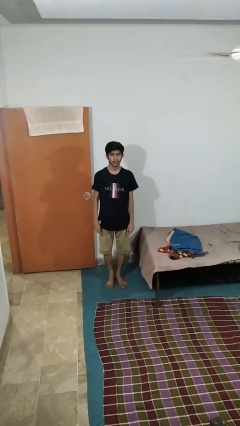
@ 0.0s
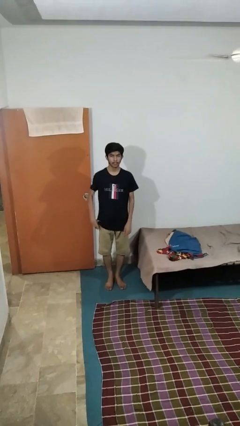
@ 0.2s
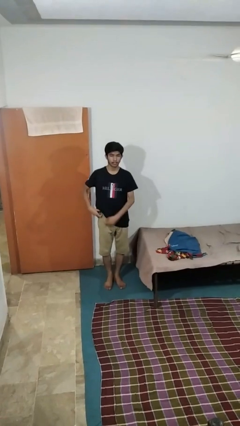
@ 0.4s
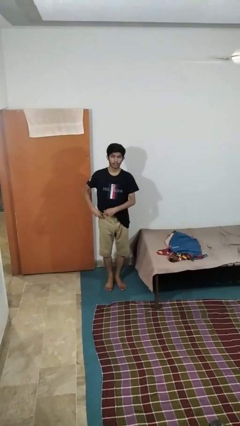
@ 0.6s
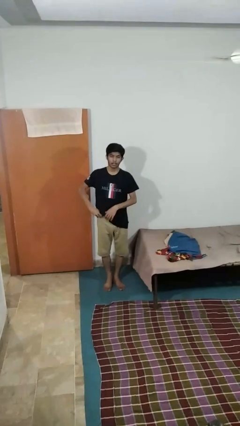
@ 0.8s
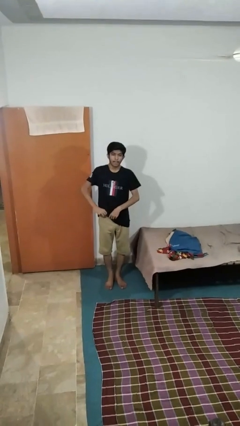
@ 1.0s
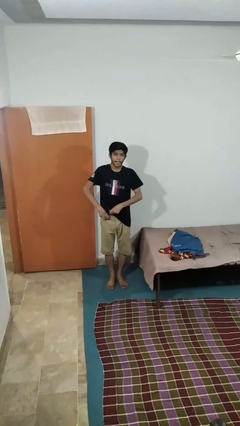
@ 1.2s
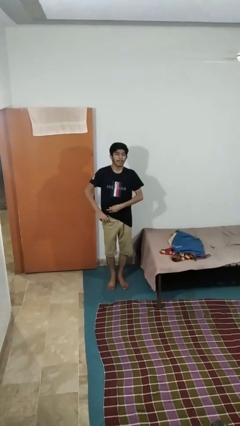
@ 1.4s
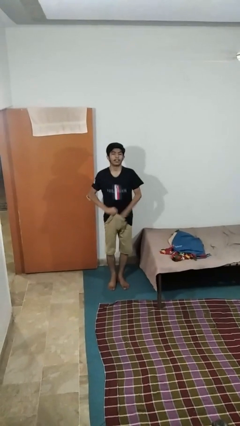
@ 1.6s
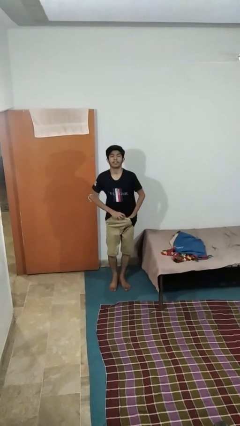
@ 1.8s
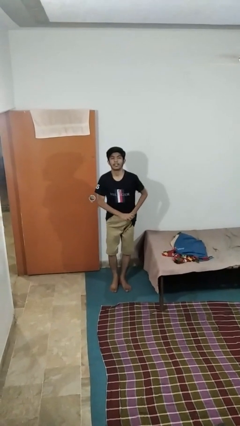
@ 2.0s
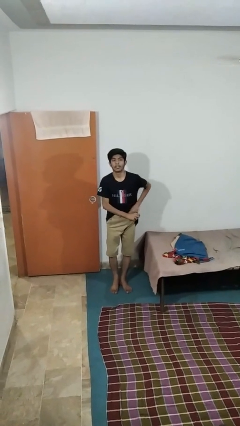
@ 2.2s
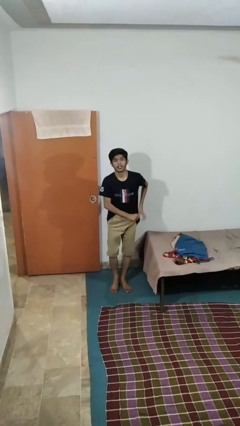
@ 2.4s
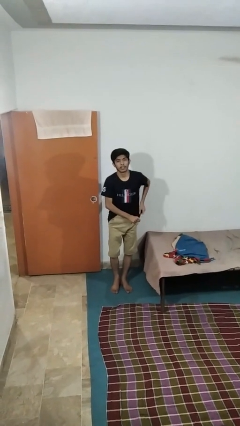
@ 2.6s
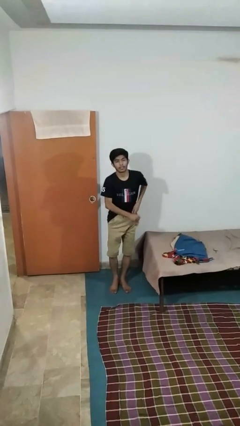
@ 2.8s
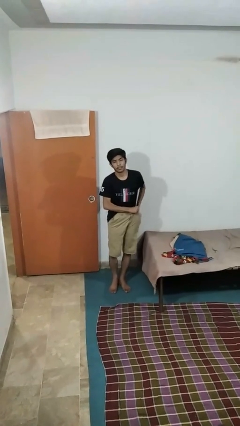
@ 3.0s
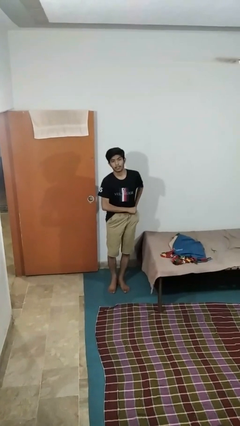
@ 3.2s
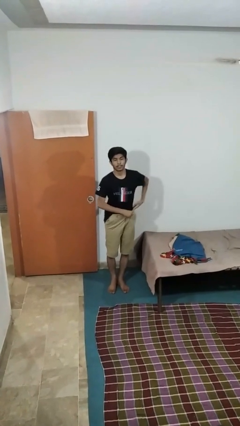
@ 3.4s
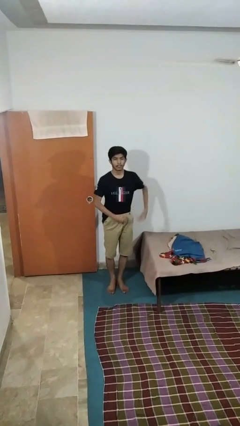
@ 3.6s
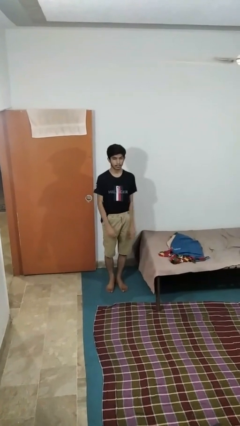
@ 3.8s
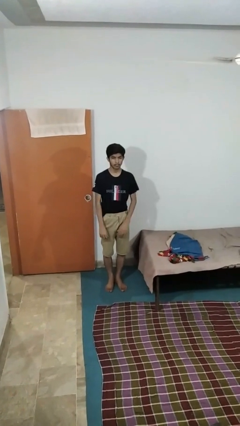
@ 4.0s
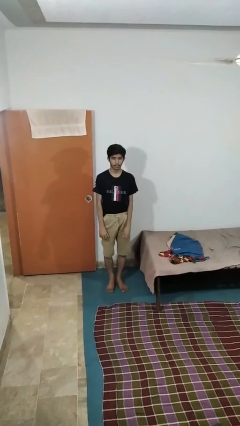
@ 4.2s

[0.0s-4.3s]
person tucks in shirt

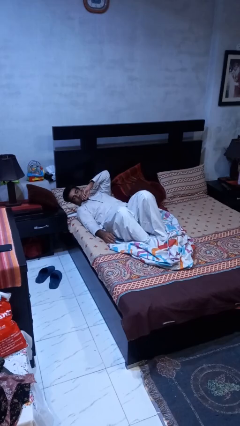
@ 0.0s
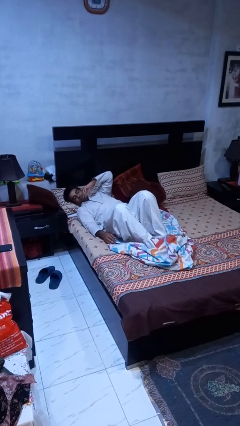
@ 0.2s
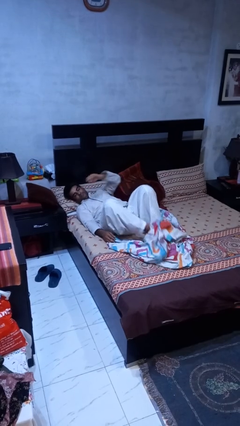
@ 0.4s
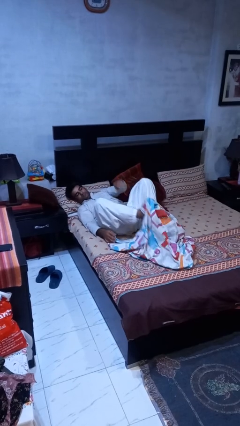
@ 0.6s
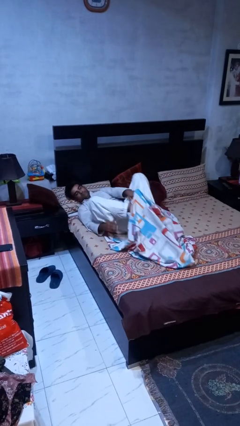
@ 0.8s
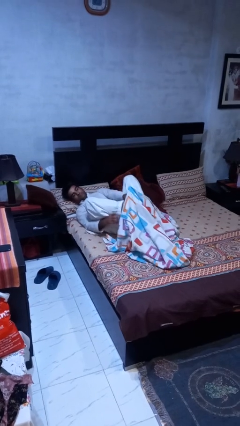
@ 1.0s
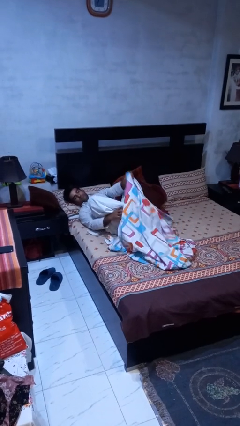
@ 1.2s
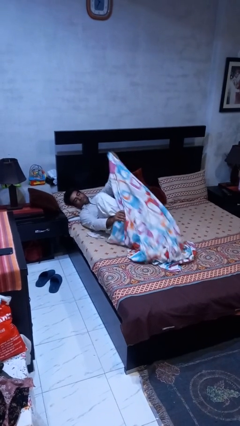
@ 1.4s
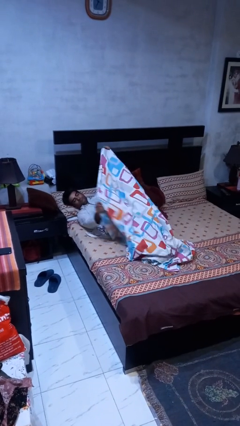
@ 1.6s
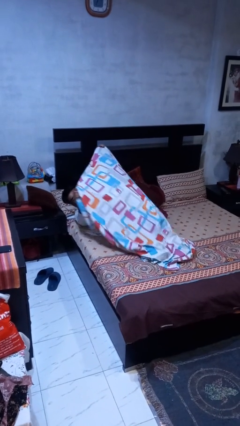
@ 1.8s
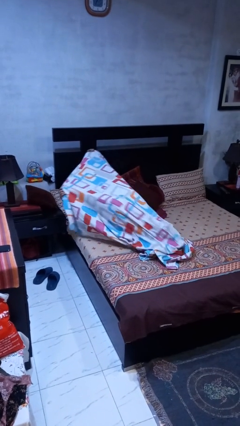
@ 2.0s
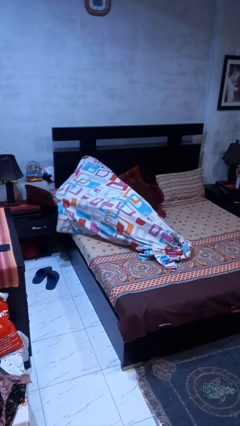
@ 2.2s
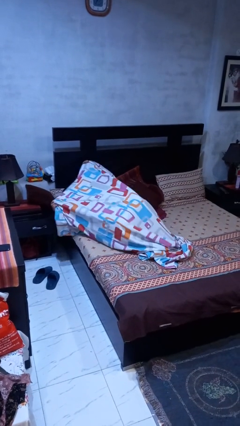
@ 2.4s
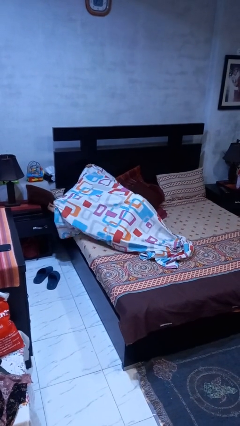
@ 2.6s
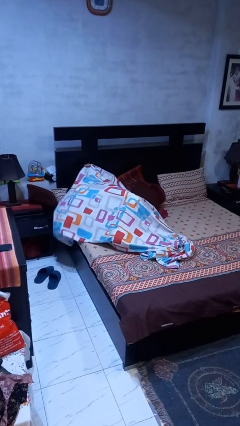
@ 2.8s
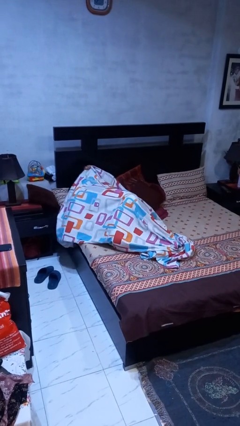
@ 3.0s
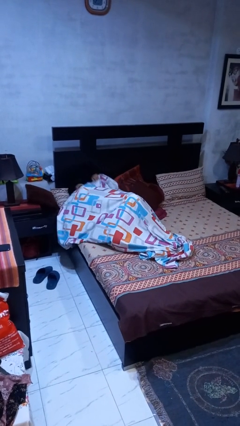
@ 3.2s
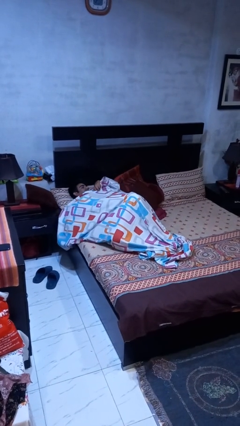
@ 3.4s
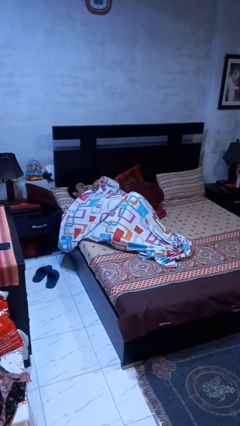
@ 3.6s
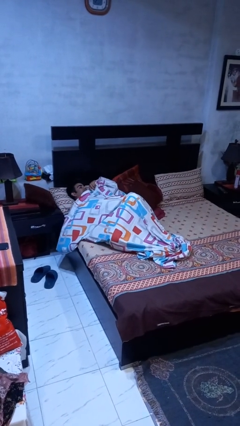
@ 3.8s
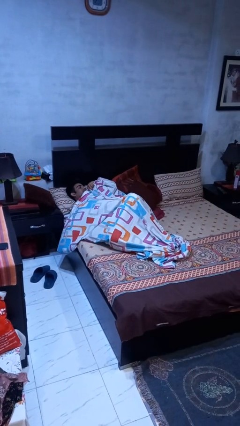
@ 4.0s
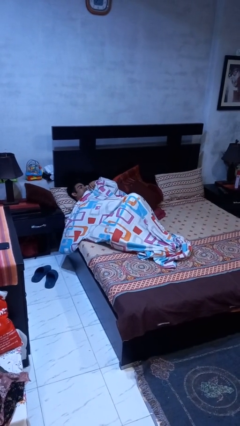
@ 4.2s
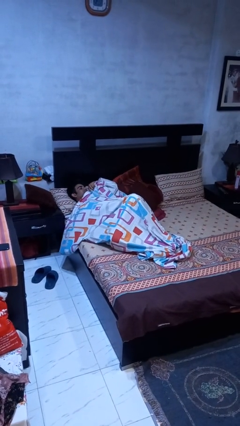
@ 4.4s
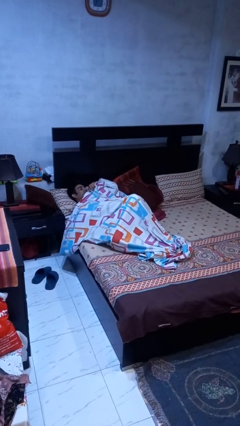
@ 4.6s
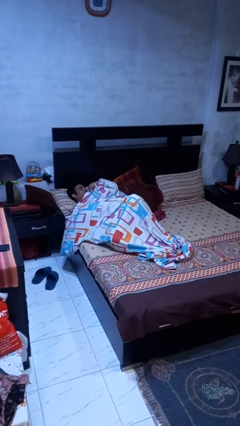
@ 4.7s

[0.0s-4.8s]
person covers with bedsheets

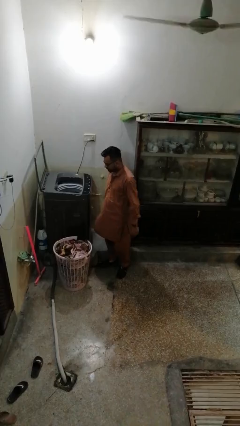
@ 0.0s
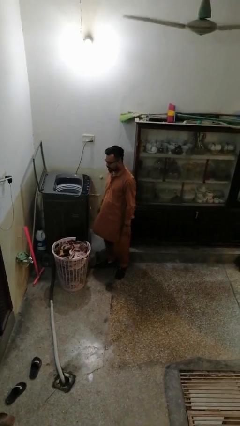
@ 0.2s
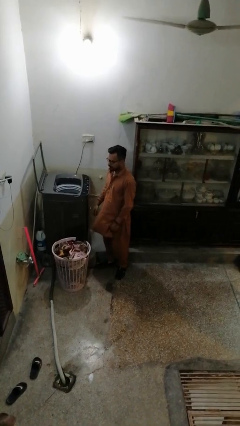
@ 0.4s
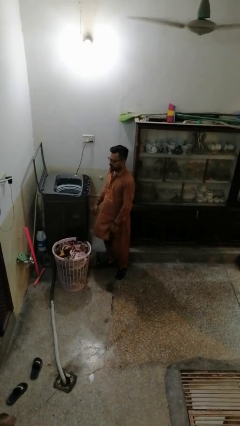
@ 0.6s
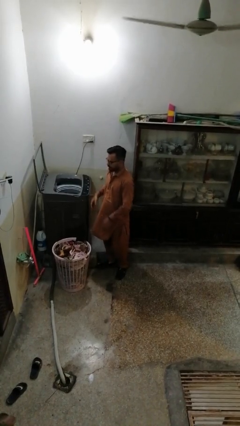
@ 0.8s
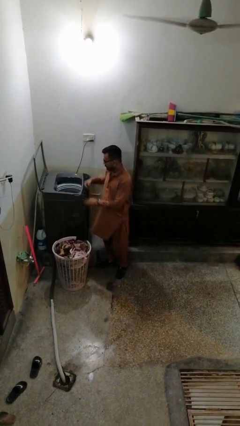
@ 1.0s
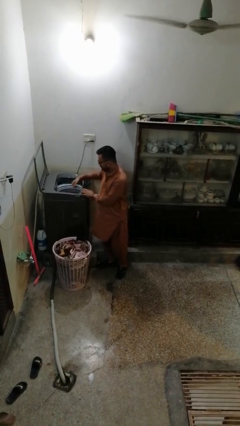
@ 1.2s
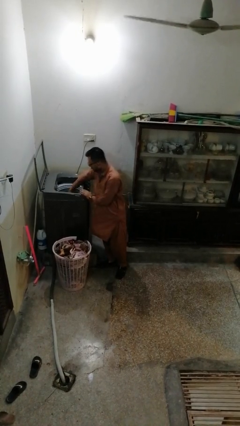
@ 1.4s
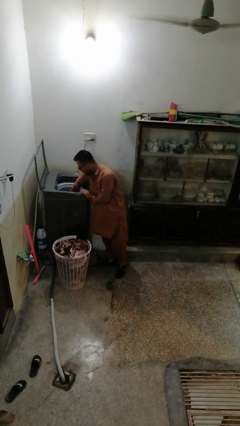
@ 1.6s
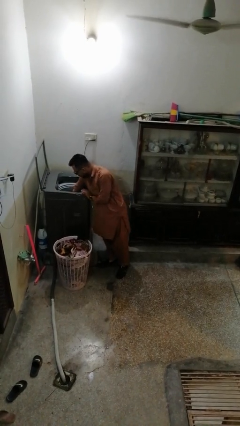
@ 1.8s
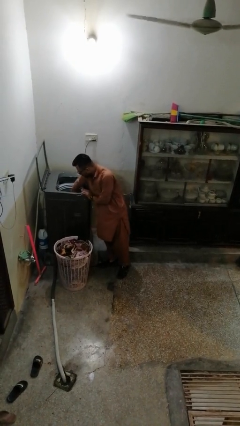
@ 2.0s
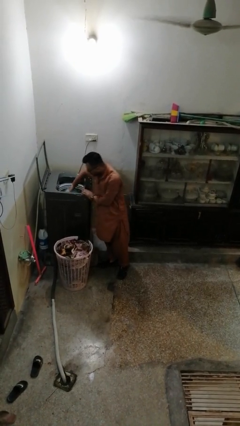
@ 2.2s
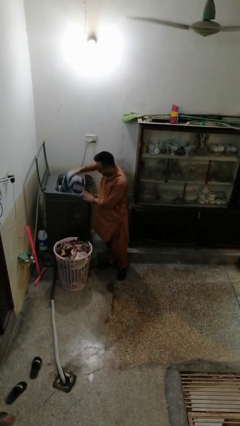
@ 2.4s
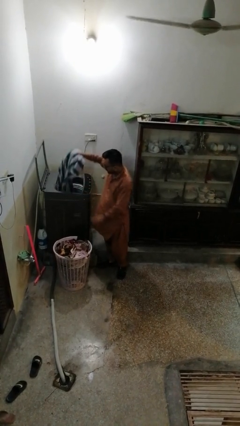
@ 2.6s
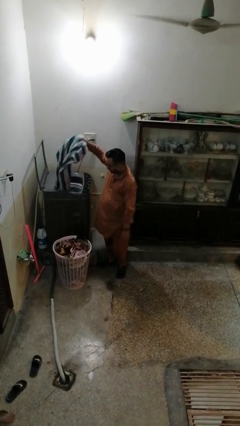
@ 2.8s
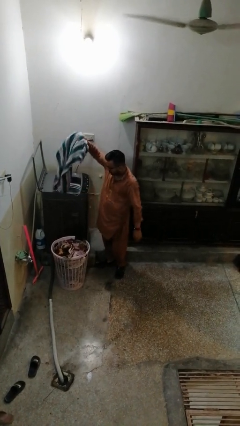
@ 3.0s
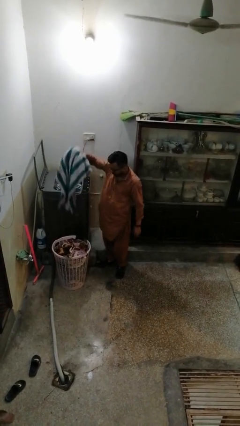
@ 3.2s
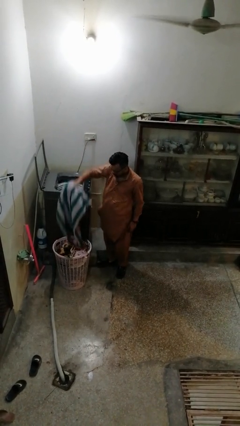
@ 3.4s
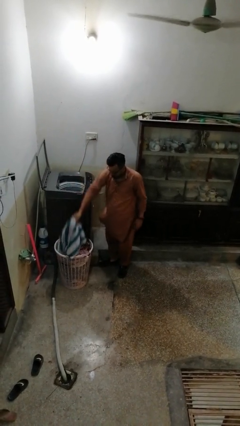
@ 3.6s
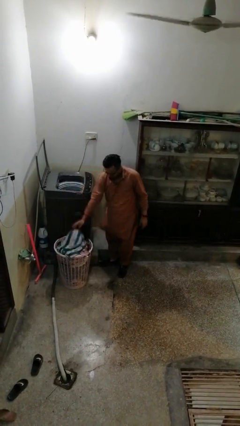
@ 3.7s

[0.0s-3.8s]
person unloads clotheswasher

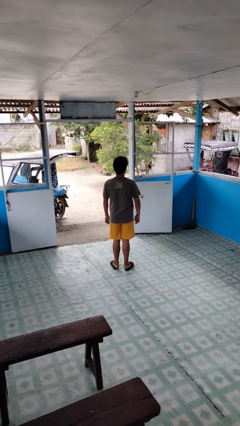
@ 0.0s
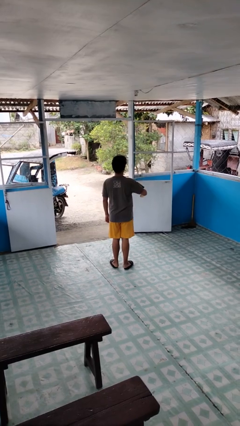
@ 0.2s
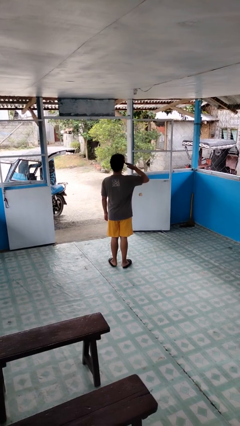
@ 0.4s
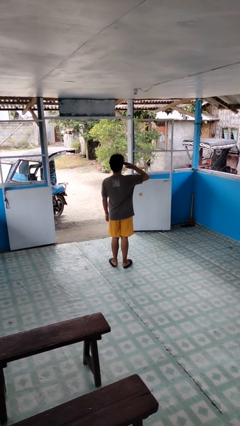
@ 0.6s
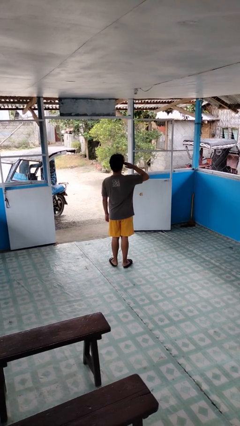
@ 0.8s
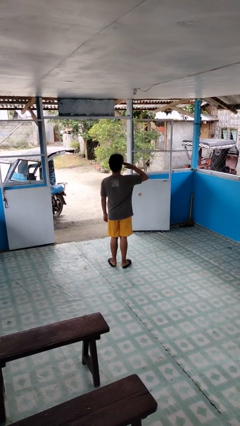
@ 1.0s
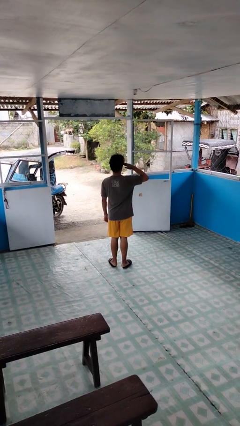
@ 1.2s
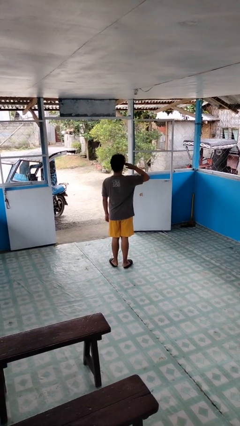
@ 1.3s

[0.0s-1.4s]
person salutes

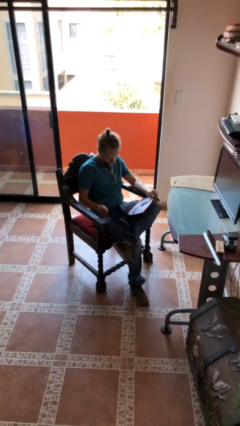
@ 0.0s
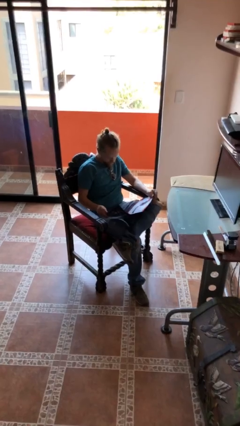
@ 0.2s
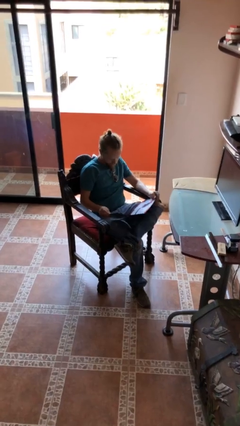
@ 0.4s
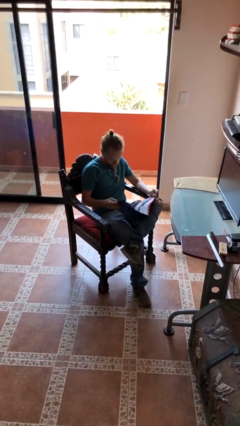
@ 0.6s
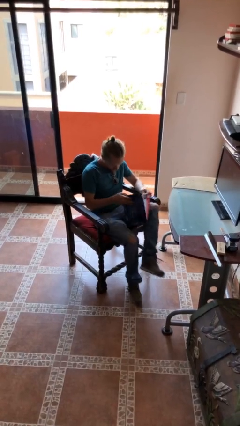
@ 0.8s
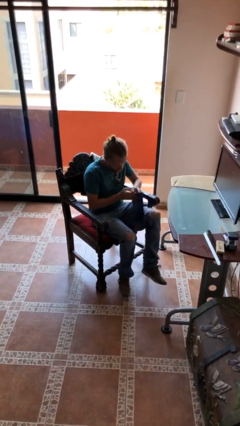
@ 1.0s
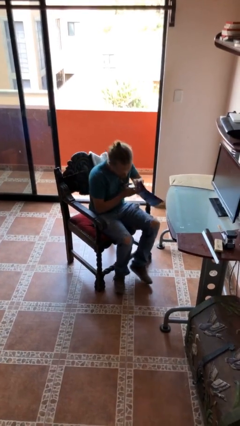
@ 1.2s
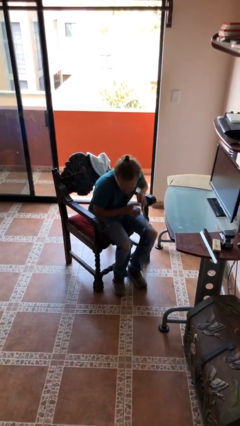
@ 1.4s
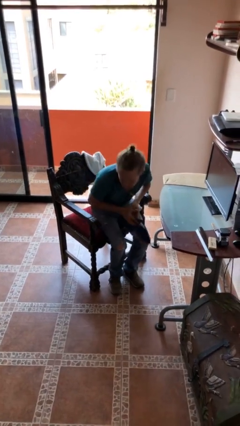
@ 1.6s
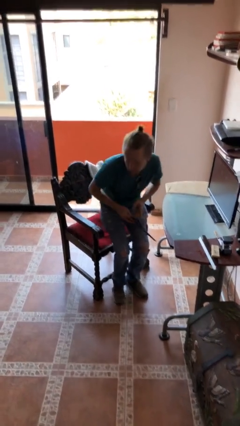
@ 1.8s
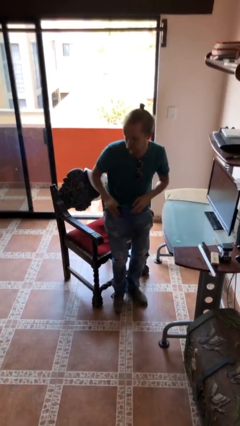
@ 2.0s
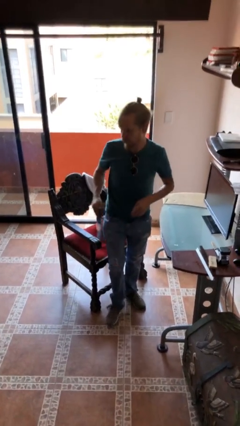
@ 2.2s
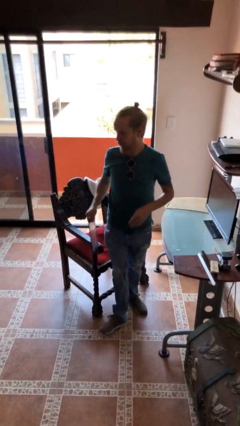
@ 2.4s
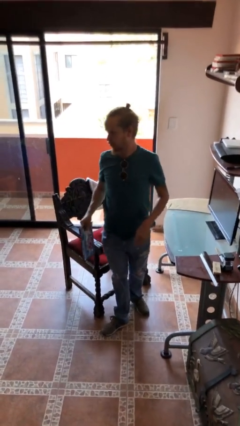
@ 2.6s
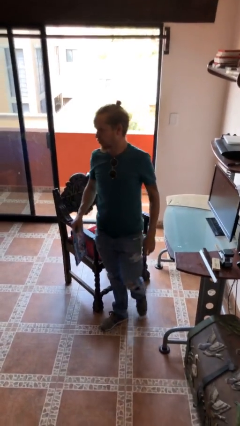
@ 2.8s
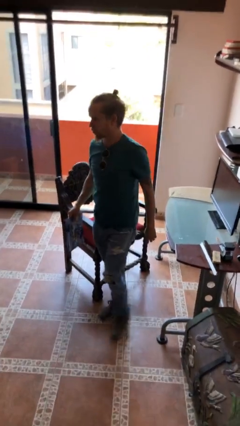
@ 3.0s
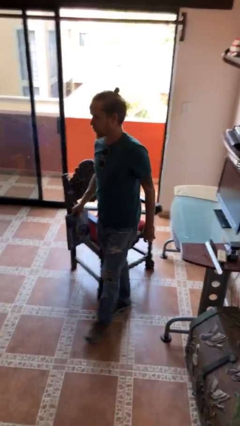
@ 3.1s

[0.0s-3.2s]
person stands up

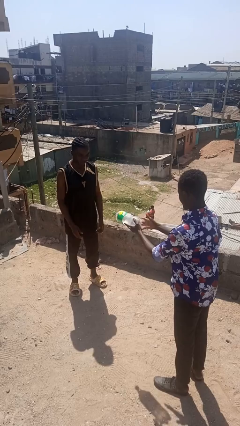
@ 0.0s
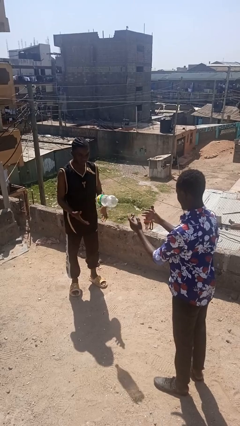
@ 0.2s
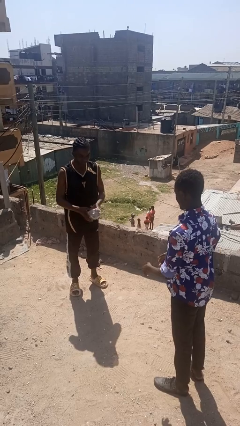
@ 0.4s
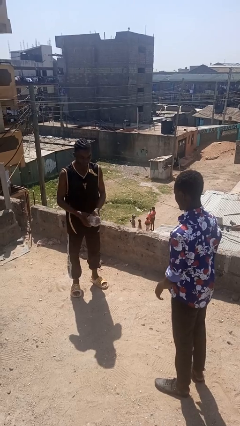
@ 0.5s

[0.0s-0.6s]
person throws object to person
